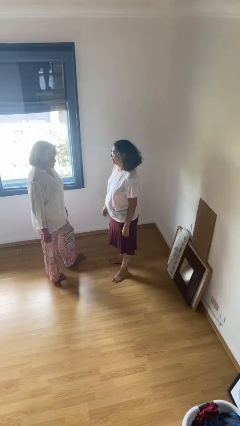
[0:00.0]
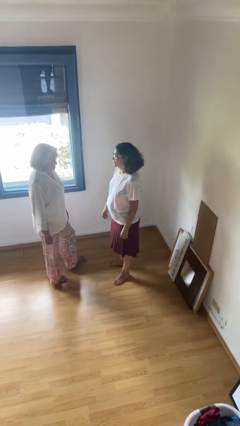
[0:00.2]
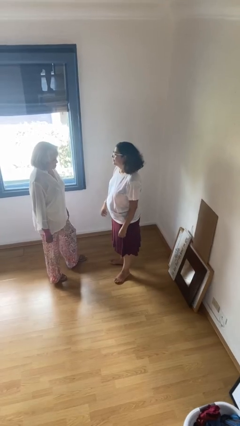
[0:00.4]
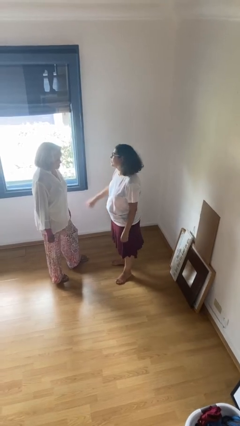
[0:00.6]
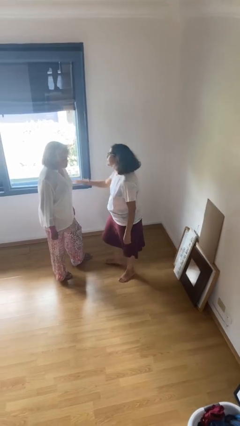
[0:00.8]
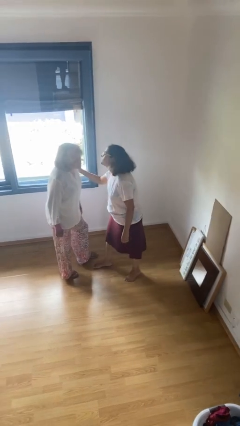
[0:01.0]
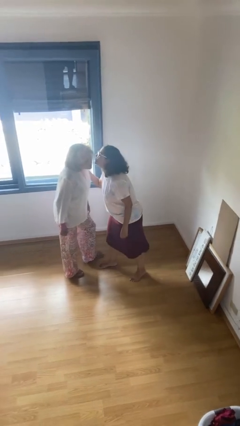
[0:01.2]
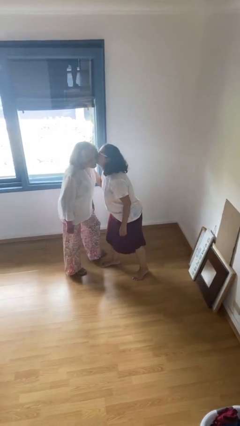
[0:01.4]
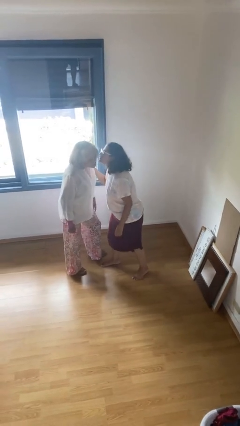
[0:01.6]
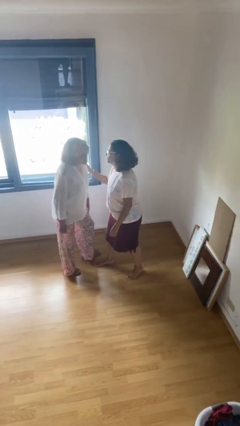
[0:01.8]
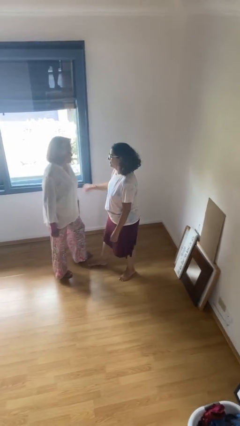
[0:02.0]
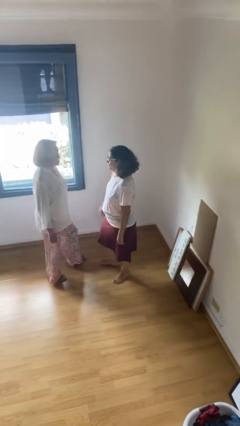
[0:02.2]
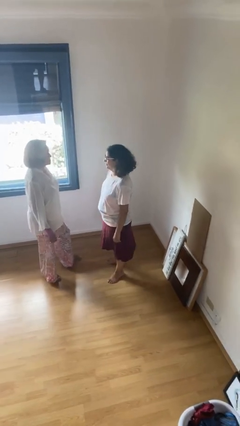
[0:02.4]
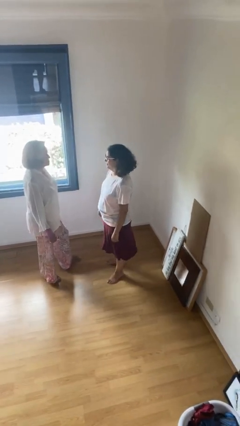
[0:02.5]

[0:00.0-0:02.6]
person kisses cheek of person

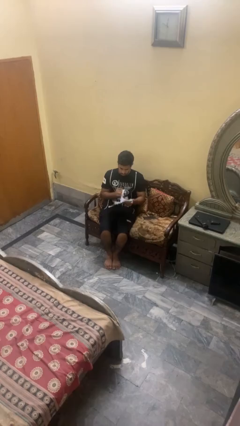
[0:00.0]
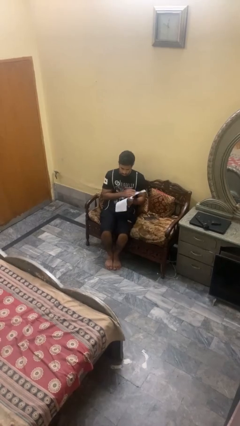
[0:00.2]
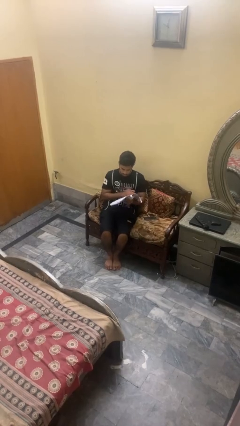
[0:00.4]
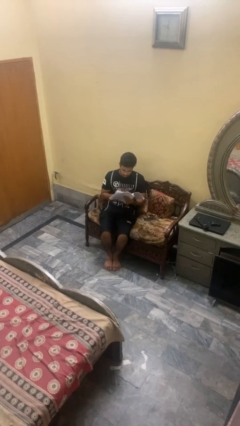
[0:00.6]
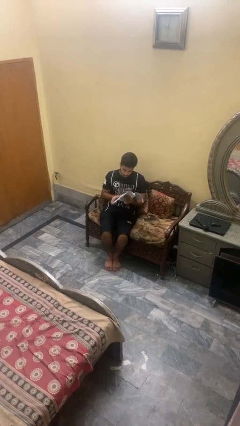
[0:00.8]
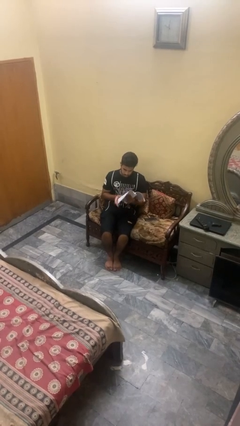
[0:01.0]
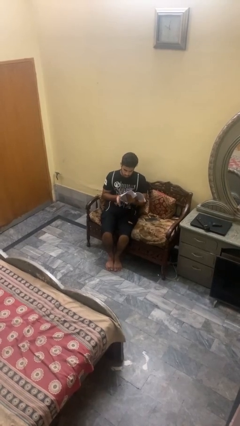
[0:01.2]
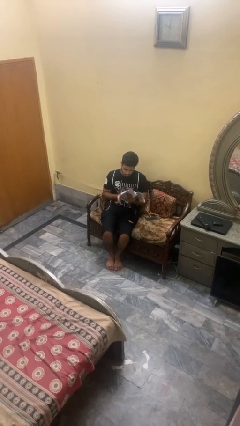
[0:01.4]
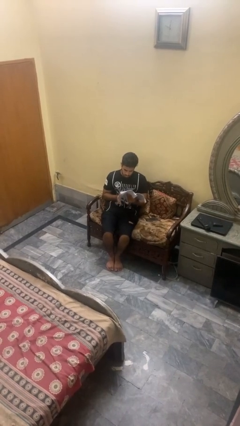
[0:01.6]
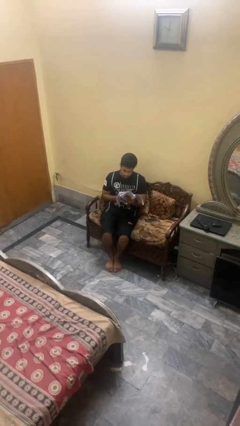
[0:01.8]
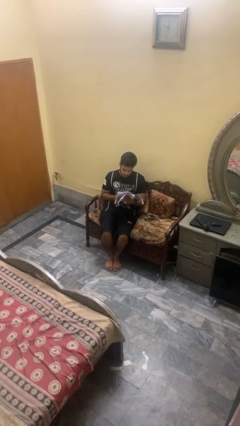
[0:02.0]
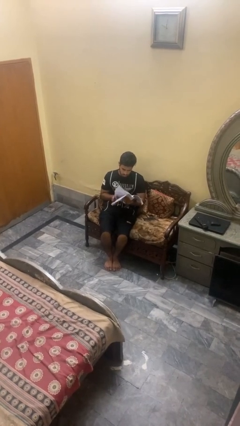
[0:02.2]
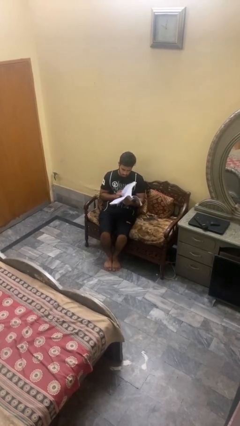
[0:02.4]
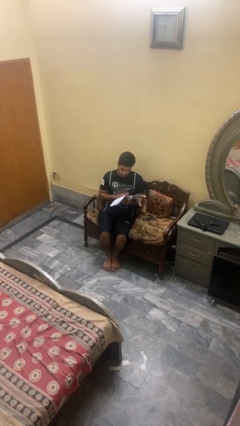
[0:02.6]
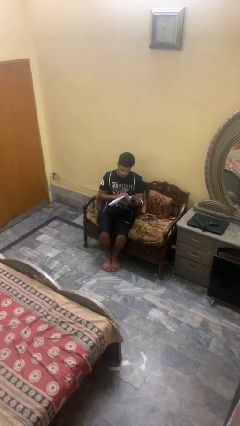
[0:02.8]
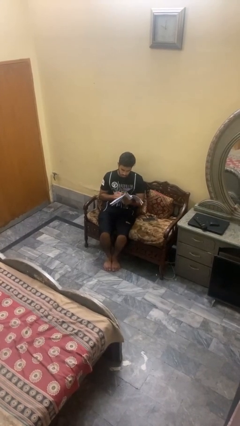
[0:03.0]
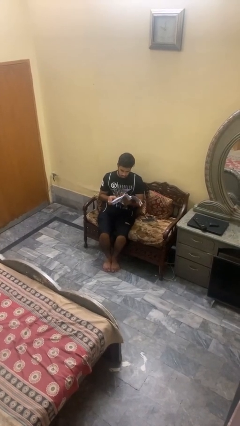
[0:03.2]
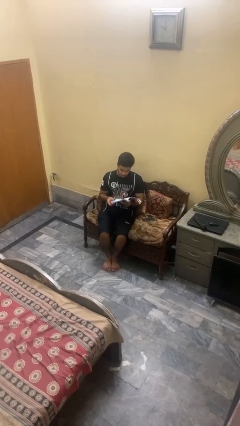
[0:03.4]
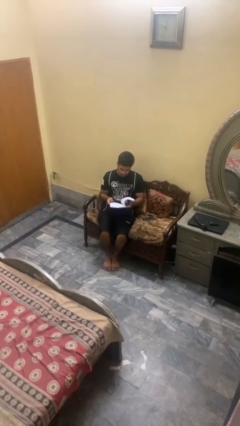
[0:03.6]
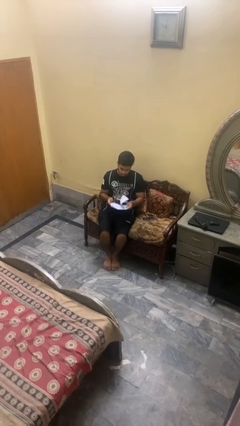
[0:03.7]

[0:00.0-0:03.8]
person reads magazine

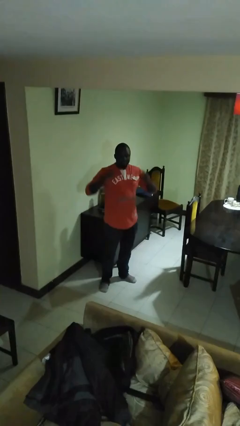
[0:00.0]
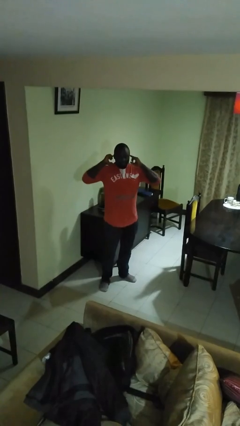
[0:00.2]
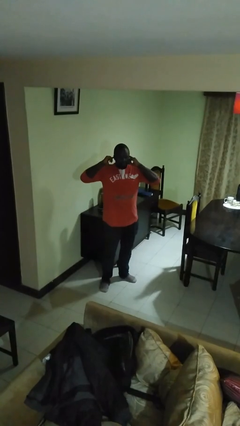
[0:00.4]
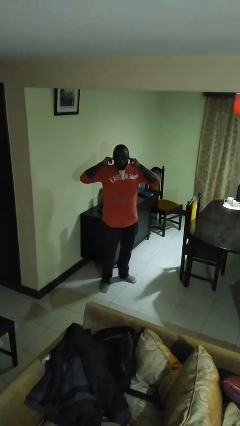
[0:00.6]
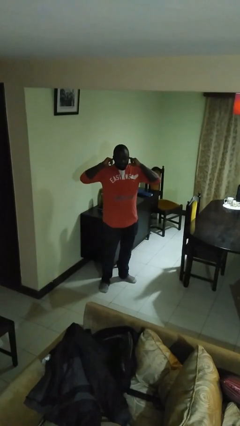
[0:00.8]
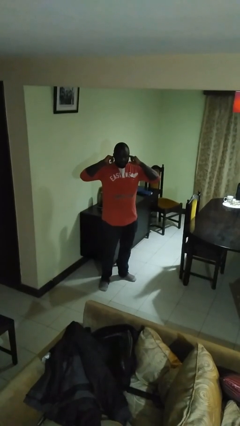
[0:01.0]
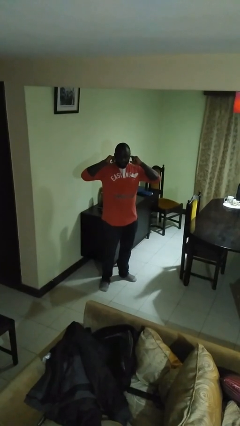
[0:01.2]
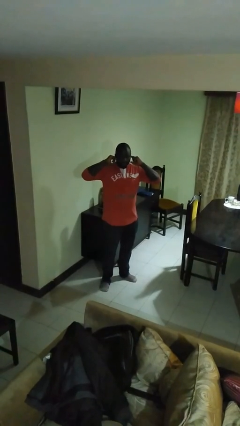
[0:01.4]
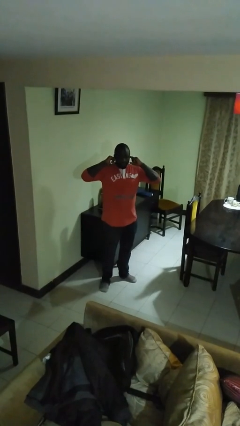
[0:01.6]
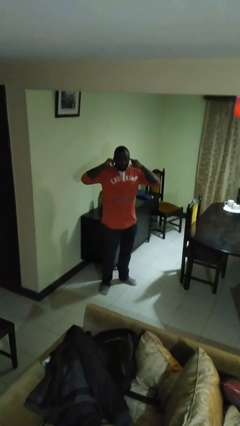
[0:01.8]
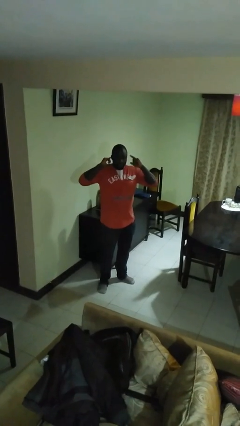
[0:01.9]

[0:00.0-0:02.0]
person puts fingers in ear

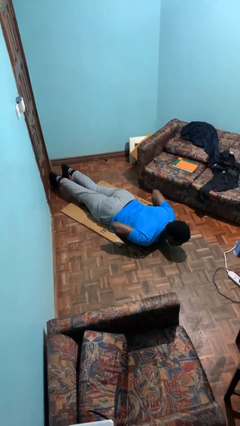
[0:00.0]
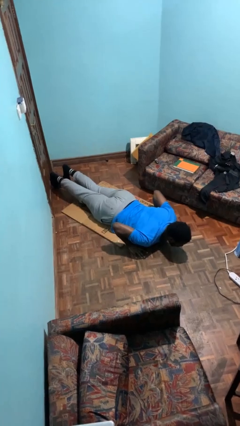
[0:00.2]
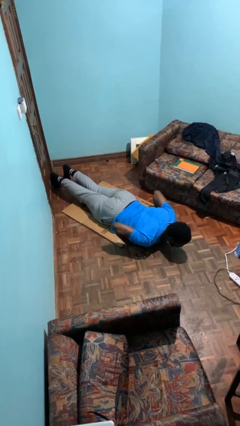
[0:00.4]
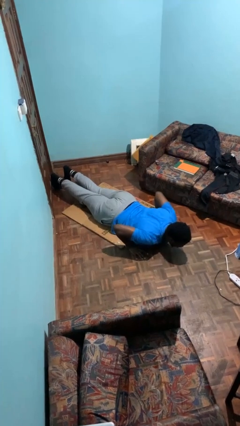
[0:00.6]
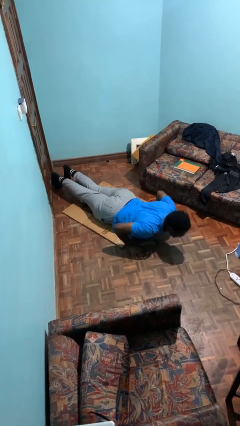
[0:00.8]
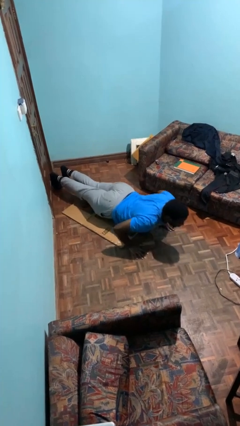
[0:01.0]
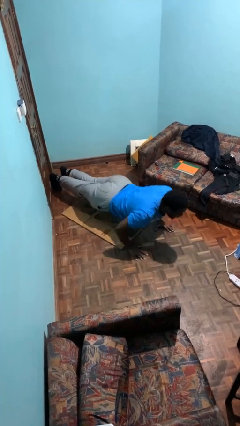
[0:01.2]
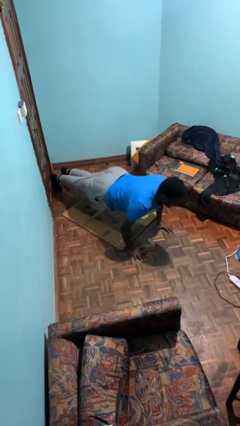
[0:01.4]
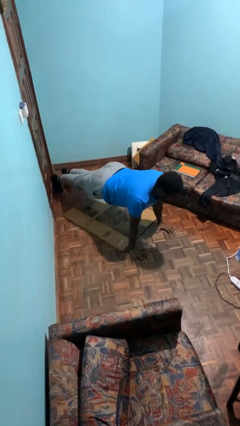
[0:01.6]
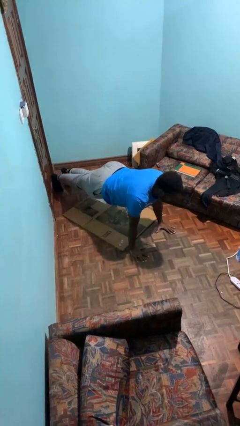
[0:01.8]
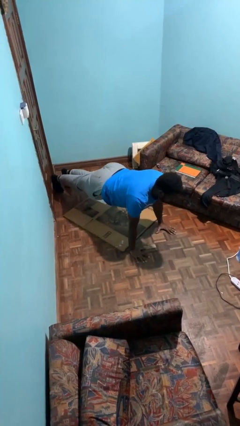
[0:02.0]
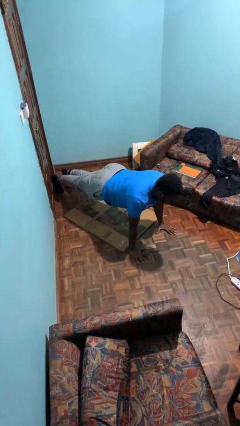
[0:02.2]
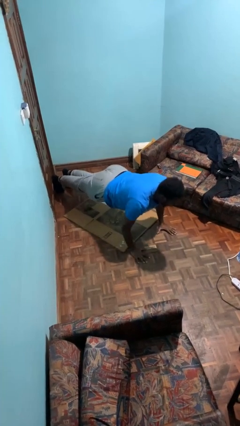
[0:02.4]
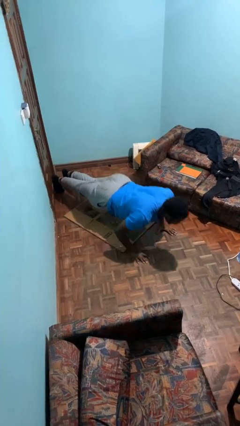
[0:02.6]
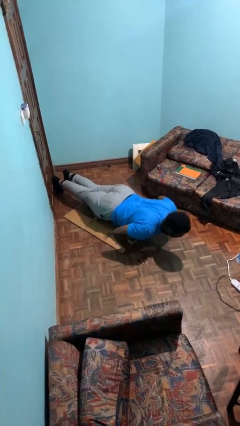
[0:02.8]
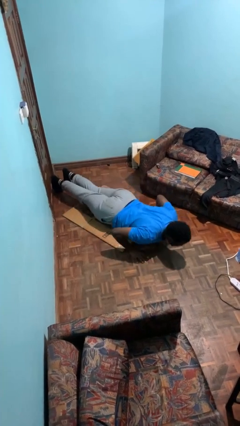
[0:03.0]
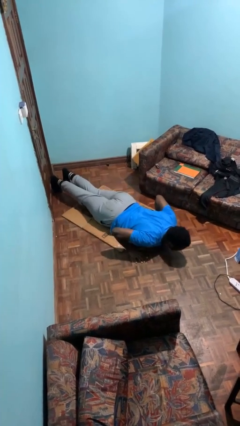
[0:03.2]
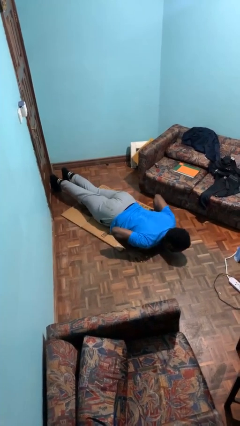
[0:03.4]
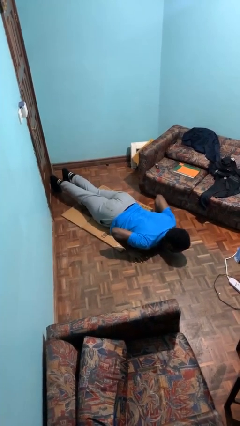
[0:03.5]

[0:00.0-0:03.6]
person exercises with pushup

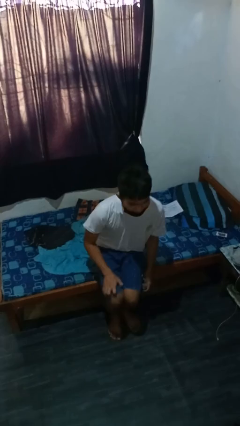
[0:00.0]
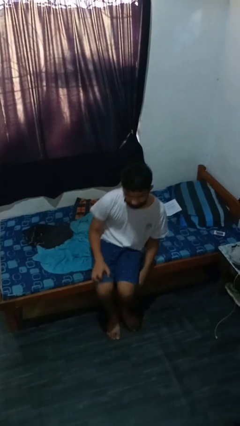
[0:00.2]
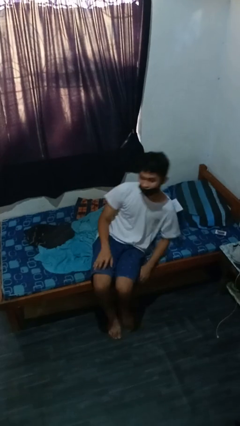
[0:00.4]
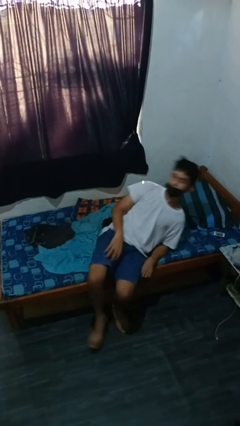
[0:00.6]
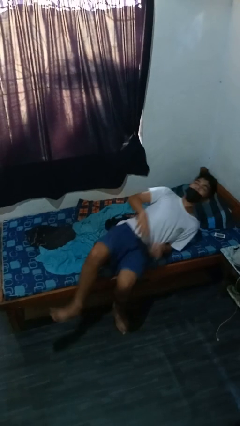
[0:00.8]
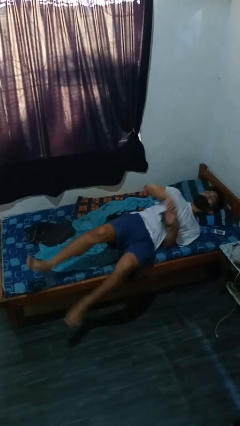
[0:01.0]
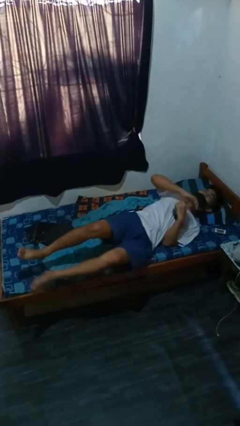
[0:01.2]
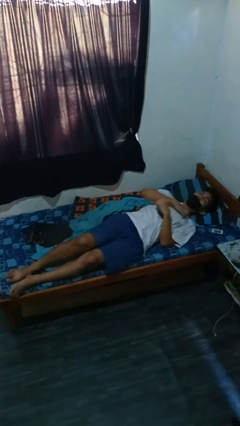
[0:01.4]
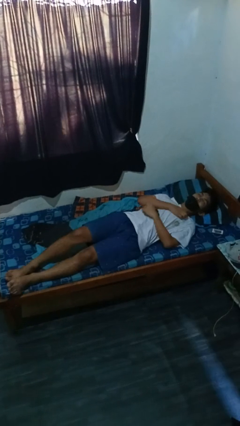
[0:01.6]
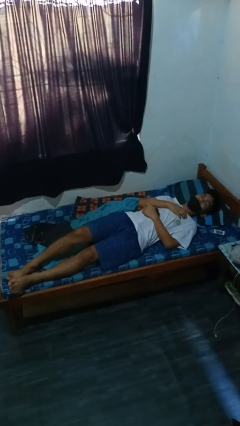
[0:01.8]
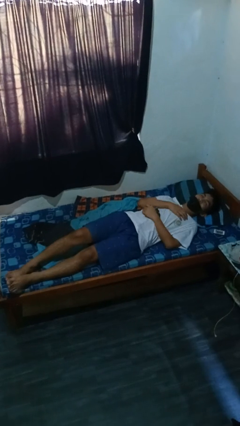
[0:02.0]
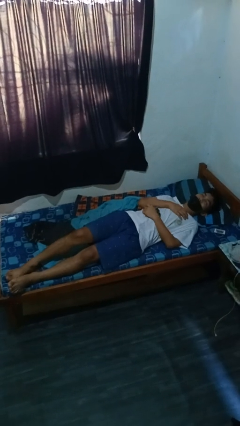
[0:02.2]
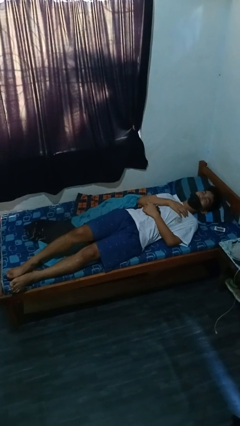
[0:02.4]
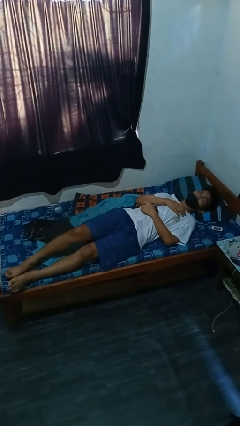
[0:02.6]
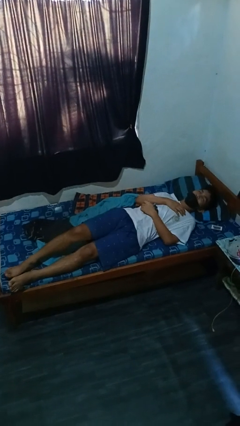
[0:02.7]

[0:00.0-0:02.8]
person lies down on bed

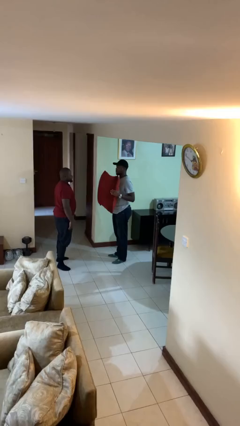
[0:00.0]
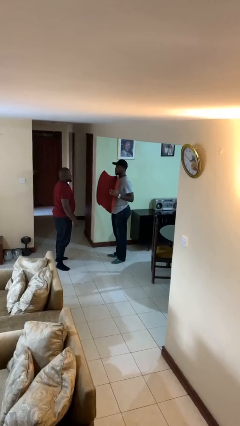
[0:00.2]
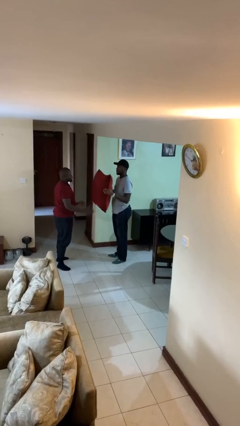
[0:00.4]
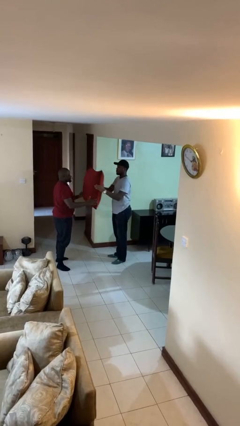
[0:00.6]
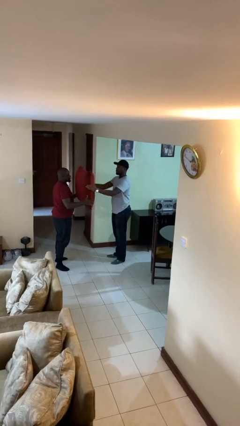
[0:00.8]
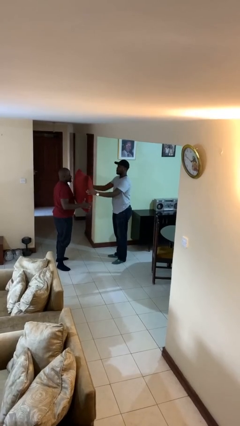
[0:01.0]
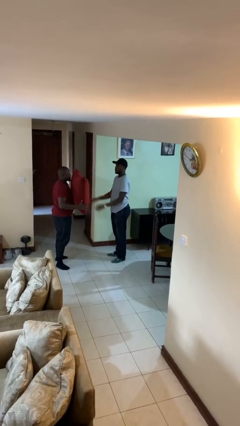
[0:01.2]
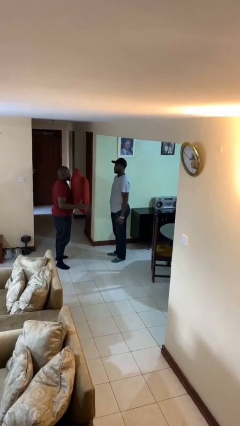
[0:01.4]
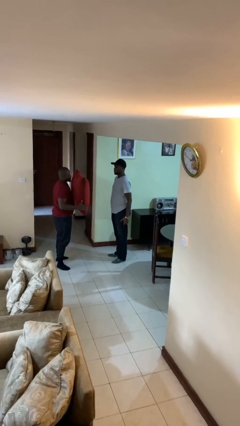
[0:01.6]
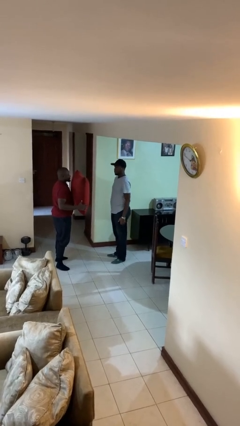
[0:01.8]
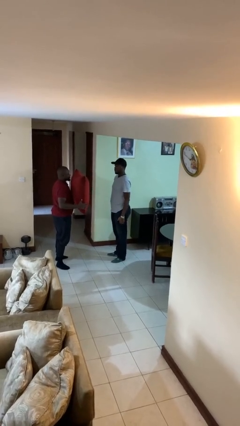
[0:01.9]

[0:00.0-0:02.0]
person transfers object to person

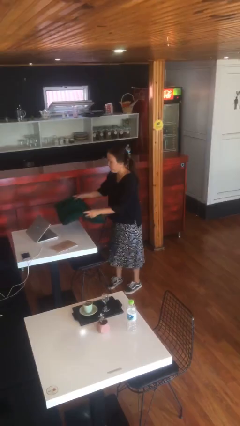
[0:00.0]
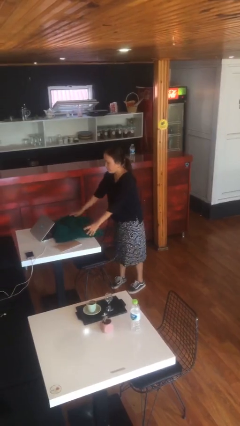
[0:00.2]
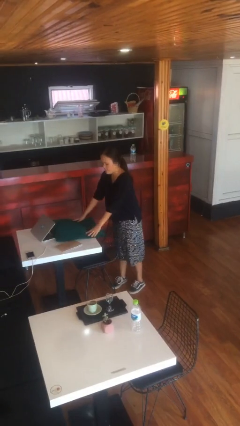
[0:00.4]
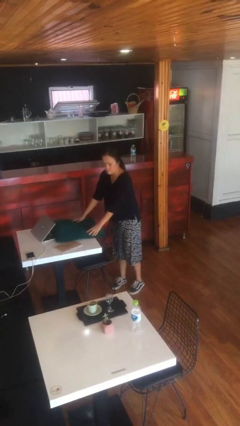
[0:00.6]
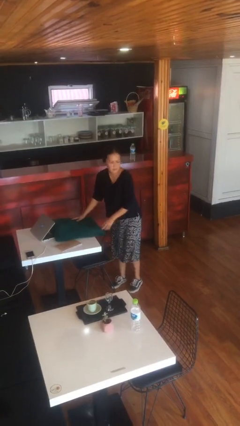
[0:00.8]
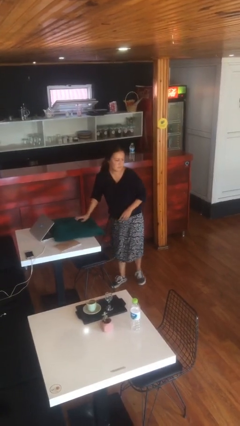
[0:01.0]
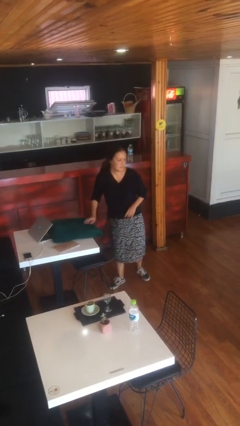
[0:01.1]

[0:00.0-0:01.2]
person puts down object on table
